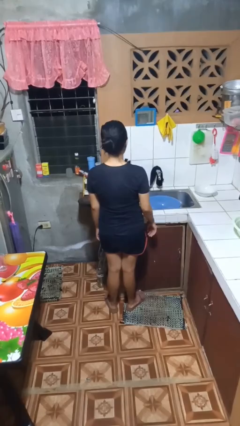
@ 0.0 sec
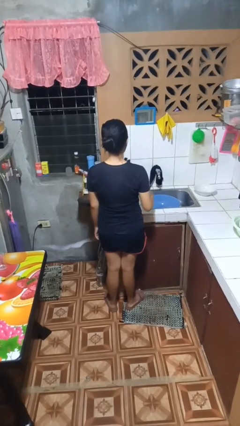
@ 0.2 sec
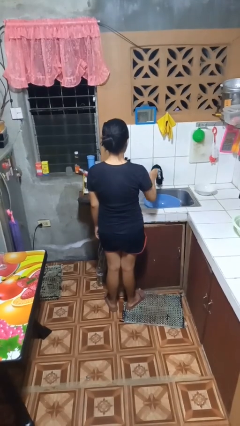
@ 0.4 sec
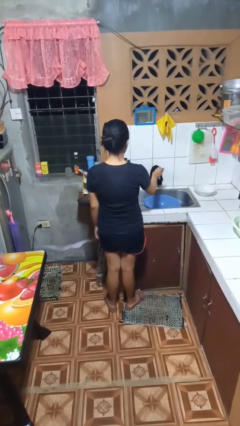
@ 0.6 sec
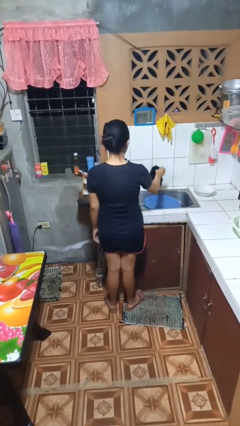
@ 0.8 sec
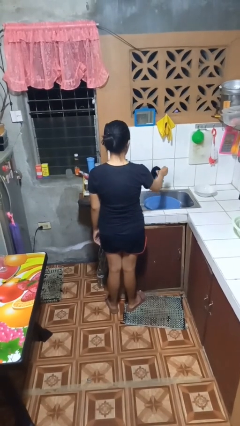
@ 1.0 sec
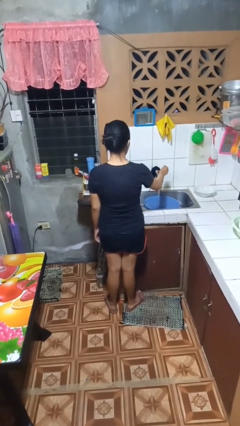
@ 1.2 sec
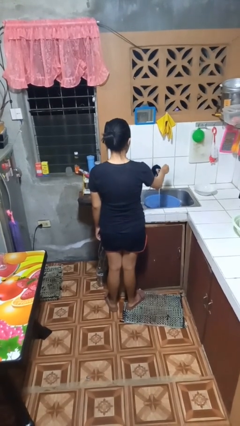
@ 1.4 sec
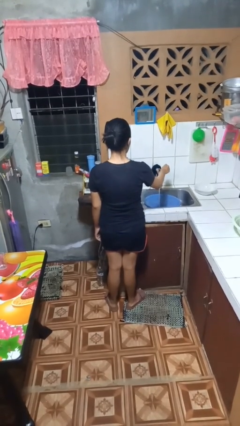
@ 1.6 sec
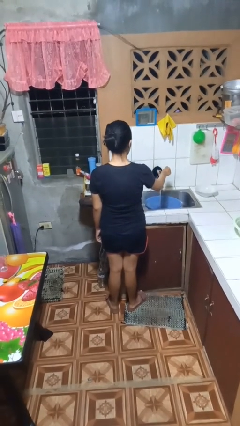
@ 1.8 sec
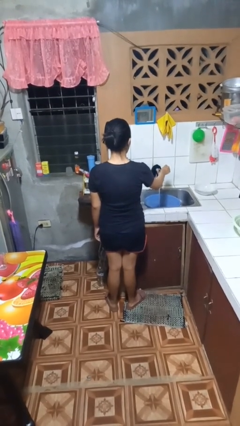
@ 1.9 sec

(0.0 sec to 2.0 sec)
person turns on faucet

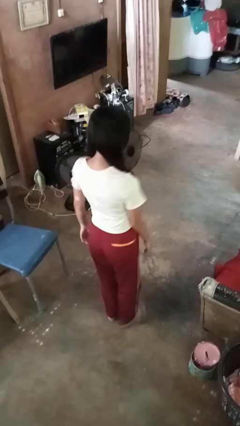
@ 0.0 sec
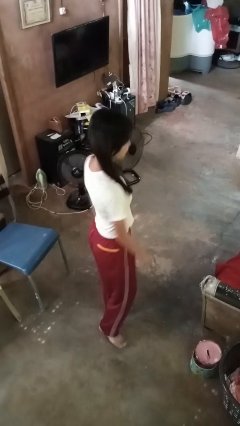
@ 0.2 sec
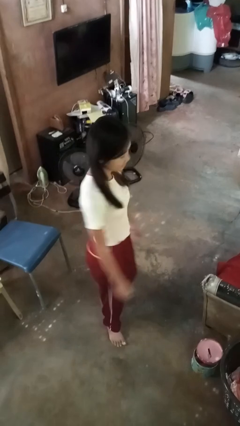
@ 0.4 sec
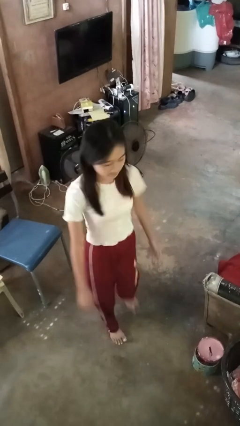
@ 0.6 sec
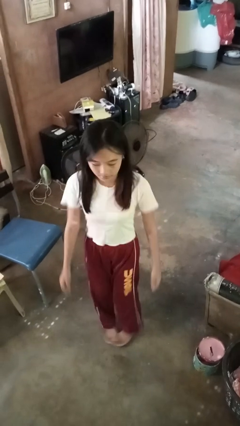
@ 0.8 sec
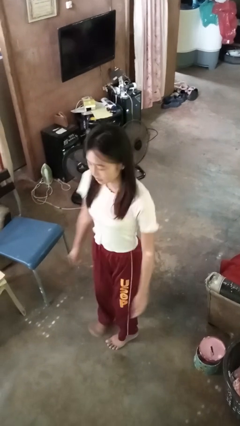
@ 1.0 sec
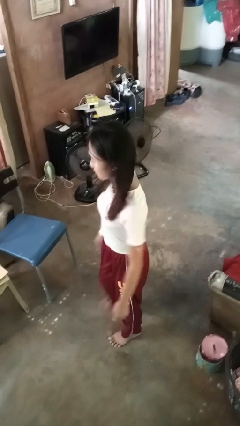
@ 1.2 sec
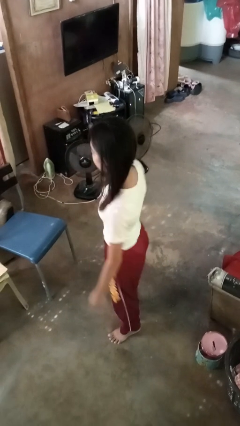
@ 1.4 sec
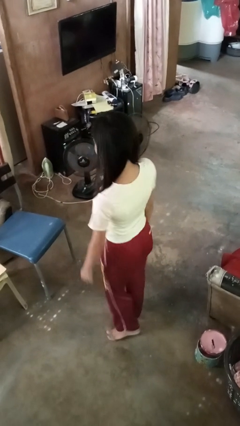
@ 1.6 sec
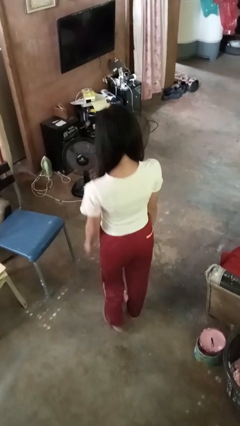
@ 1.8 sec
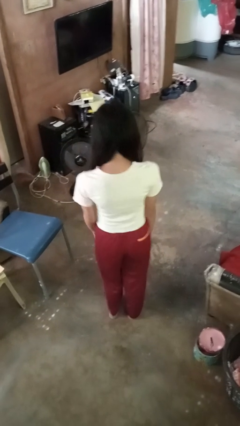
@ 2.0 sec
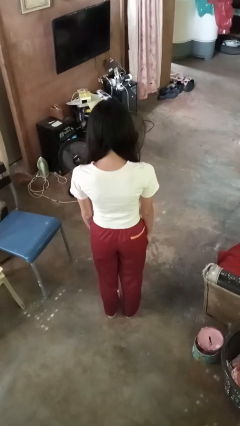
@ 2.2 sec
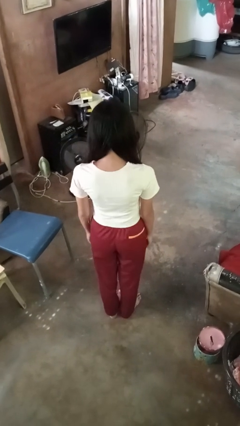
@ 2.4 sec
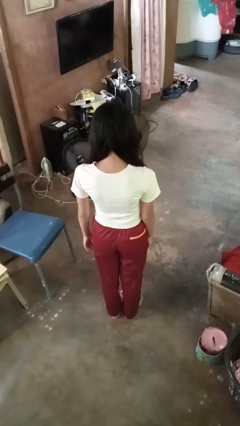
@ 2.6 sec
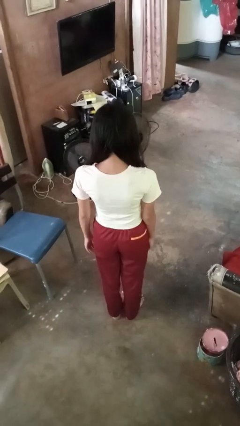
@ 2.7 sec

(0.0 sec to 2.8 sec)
person twirls

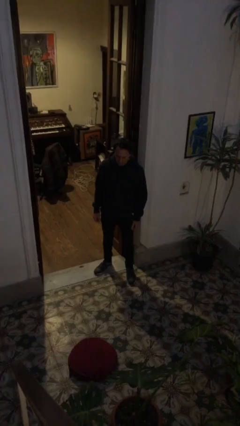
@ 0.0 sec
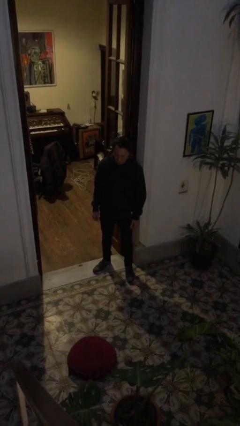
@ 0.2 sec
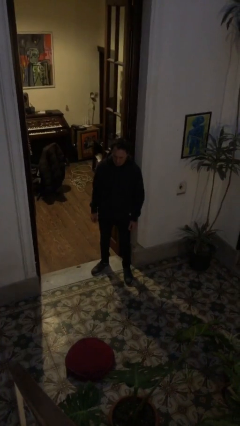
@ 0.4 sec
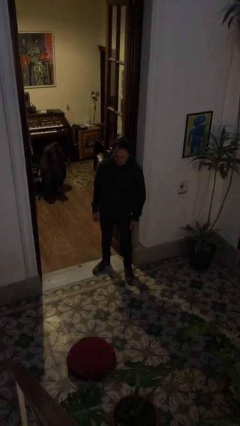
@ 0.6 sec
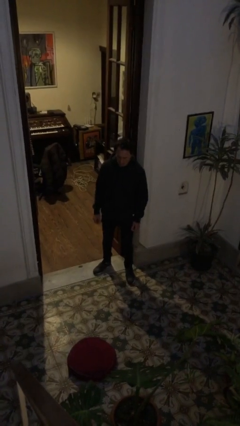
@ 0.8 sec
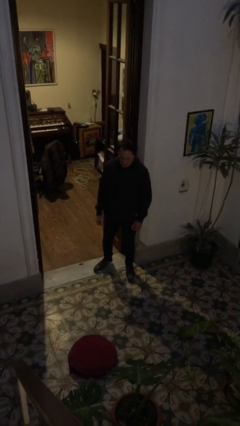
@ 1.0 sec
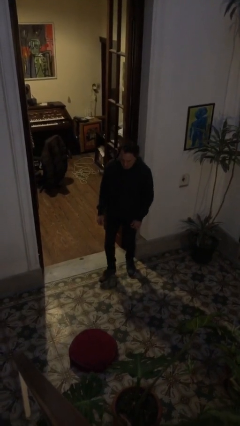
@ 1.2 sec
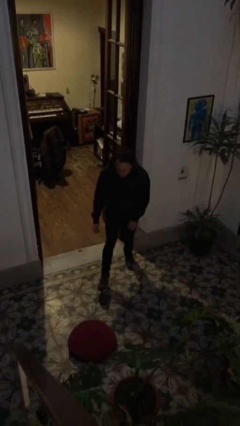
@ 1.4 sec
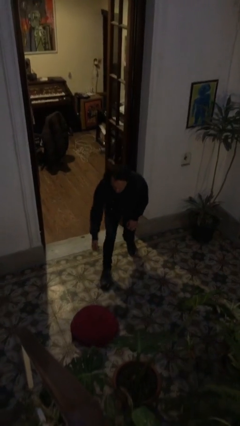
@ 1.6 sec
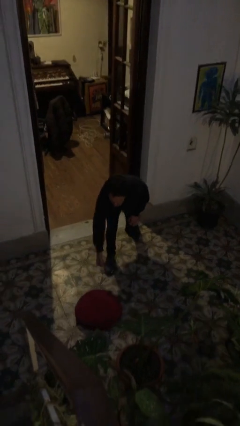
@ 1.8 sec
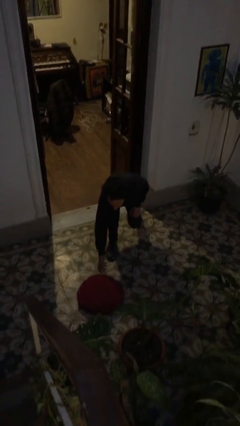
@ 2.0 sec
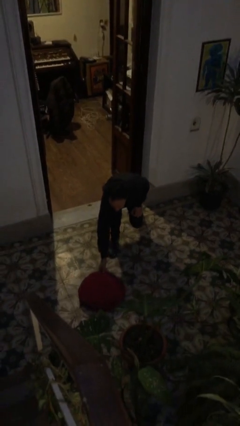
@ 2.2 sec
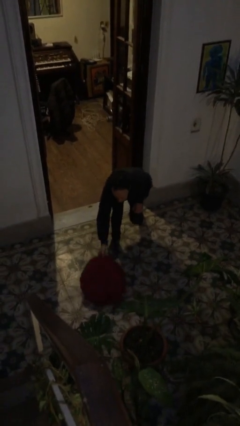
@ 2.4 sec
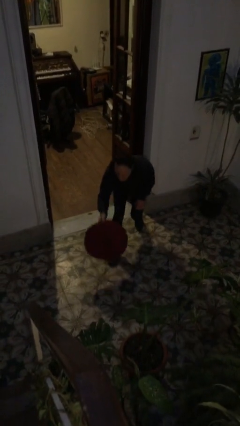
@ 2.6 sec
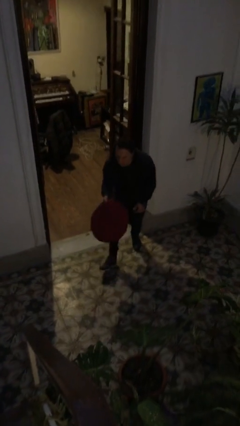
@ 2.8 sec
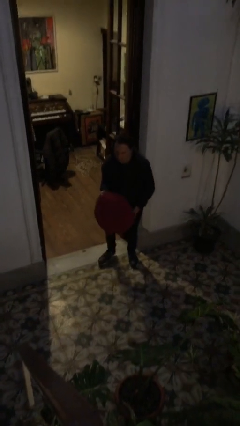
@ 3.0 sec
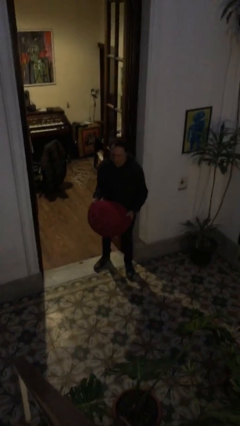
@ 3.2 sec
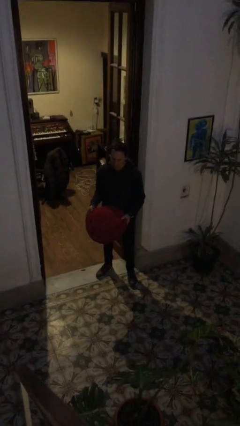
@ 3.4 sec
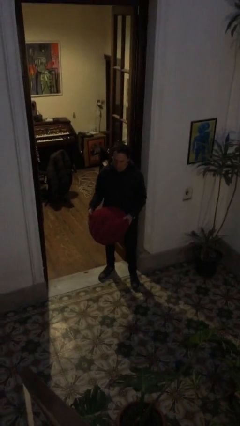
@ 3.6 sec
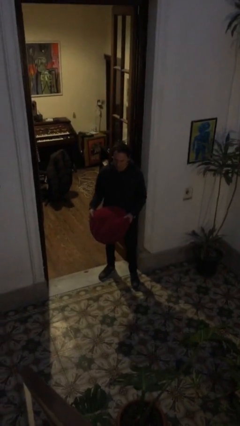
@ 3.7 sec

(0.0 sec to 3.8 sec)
person picks up object from floor

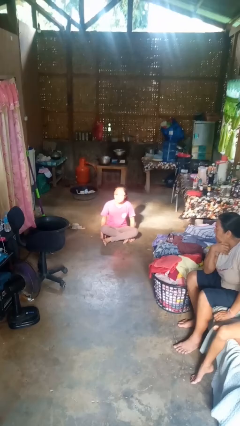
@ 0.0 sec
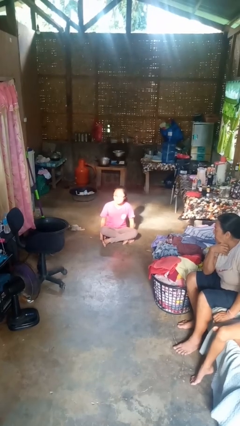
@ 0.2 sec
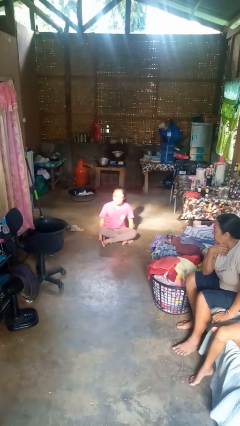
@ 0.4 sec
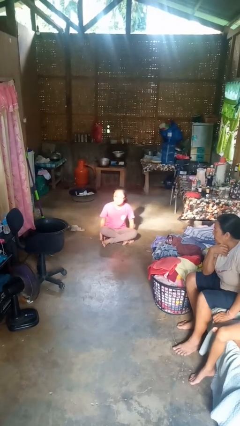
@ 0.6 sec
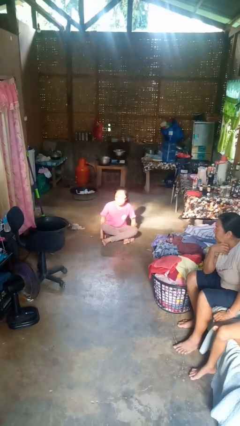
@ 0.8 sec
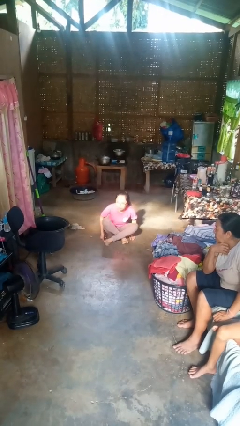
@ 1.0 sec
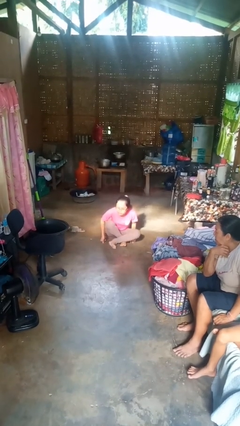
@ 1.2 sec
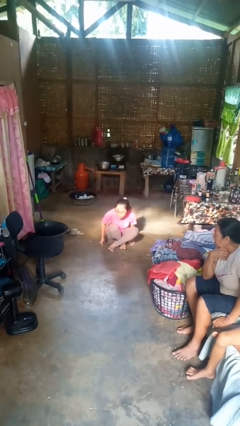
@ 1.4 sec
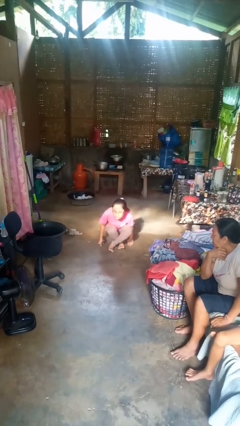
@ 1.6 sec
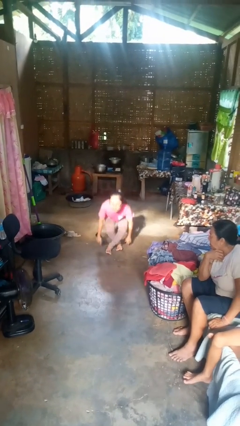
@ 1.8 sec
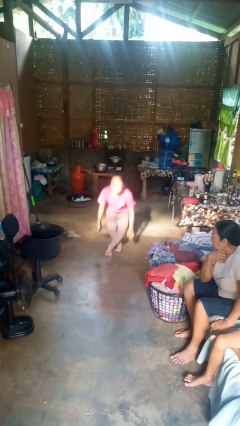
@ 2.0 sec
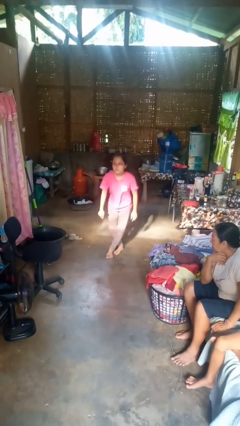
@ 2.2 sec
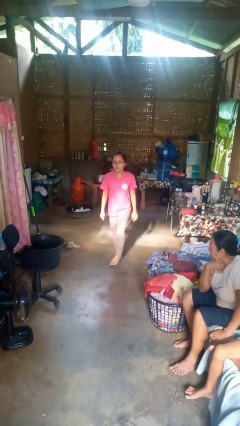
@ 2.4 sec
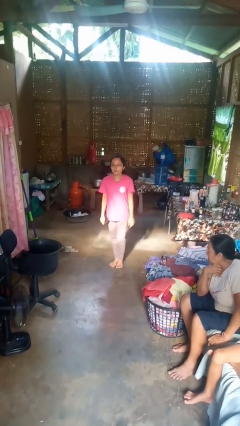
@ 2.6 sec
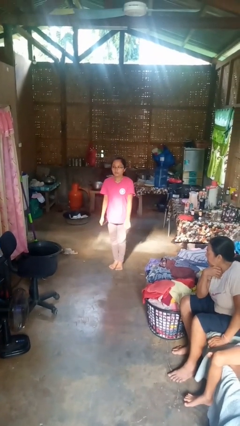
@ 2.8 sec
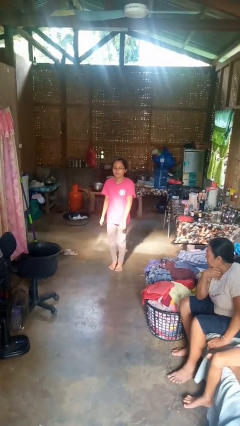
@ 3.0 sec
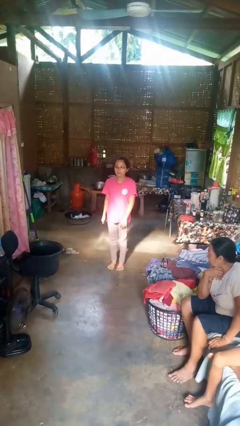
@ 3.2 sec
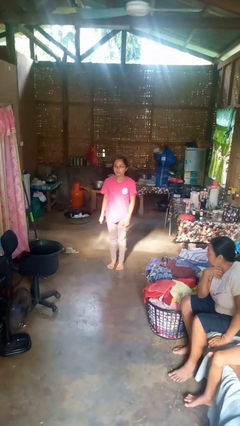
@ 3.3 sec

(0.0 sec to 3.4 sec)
person stands up from floor

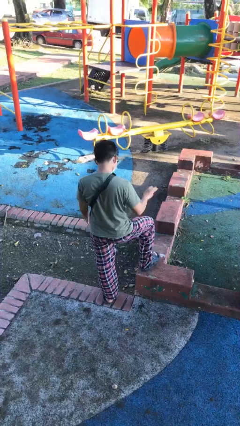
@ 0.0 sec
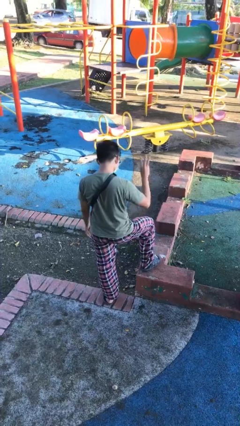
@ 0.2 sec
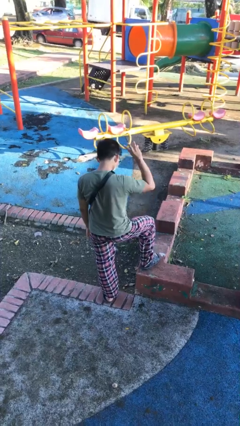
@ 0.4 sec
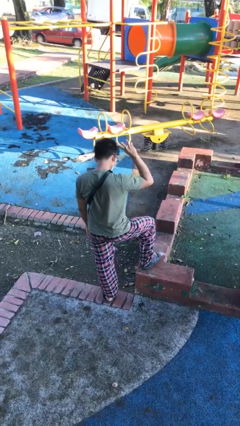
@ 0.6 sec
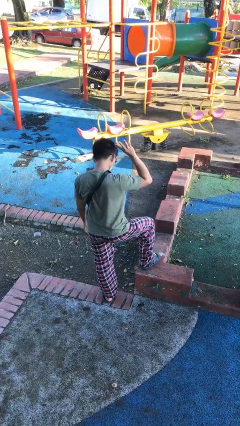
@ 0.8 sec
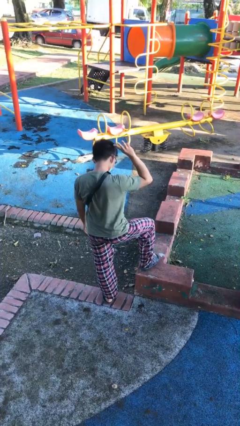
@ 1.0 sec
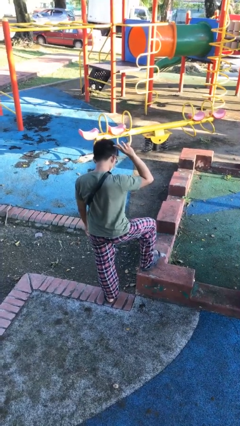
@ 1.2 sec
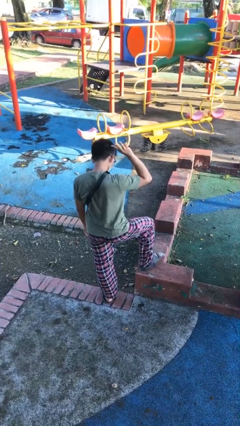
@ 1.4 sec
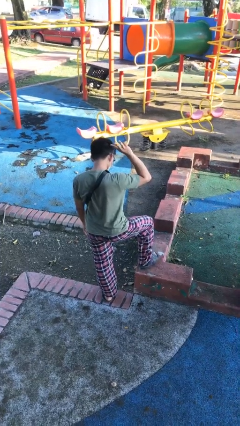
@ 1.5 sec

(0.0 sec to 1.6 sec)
person gestures number three

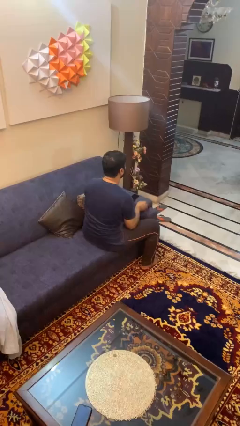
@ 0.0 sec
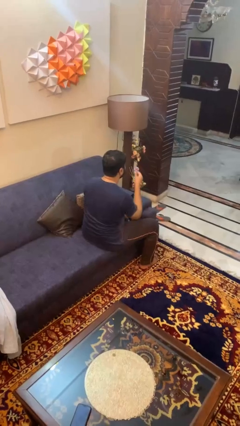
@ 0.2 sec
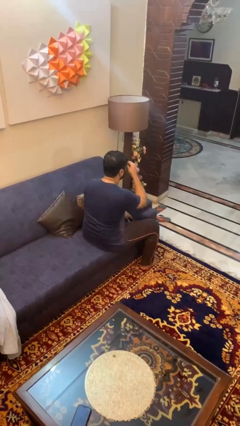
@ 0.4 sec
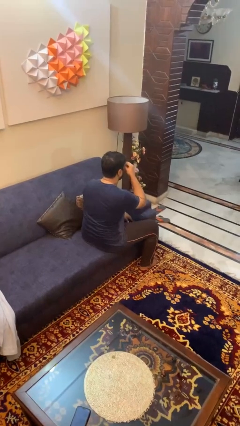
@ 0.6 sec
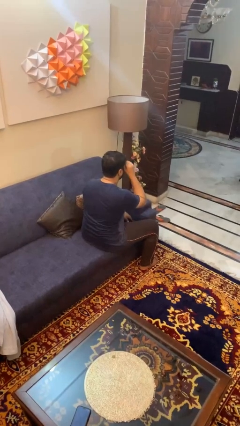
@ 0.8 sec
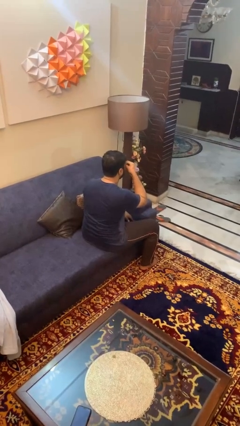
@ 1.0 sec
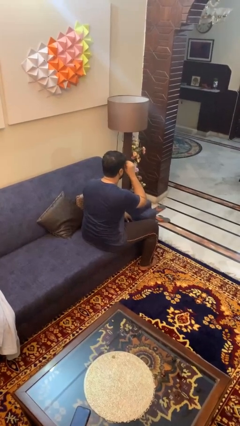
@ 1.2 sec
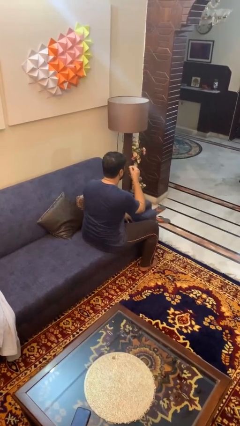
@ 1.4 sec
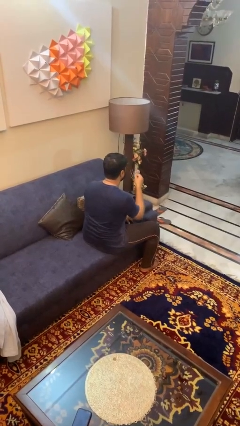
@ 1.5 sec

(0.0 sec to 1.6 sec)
person rubs eyes

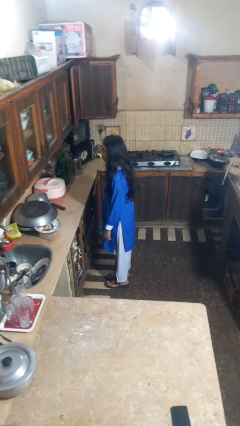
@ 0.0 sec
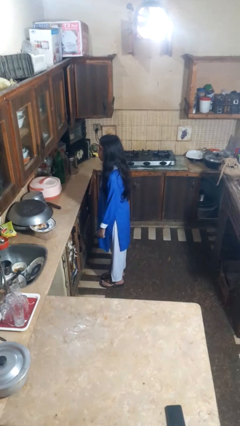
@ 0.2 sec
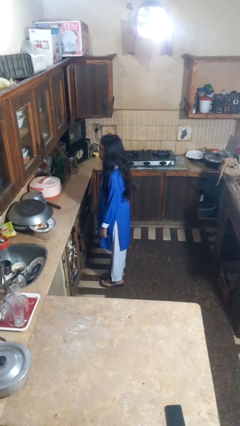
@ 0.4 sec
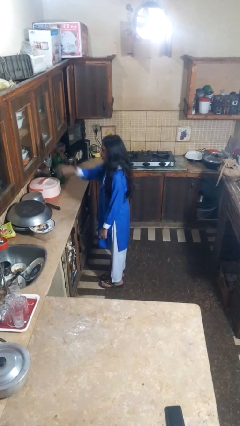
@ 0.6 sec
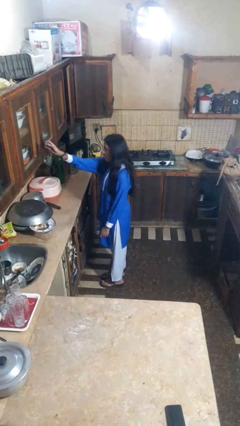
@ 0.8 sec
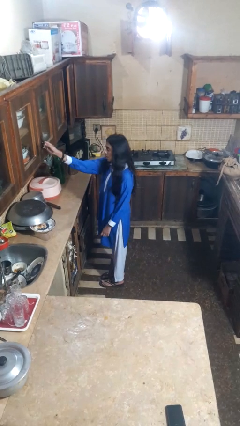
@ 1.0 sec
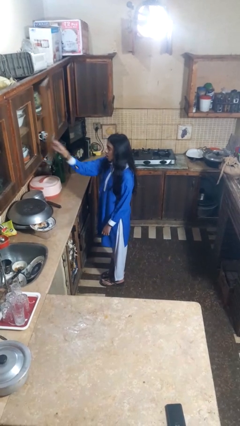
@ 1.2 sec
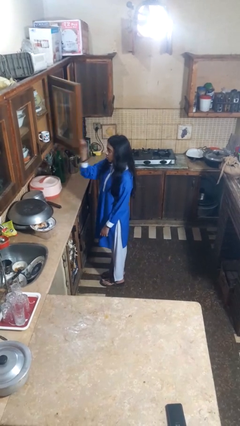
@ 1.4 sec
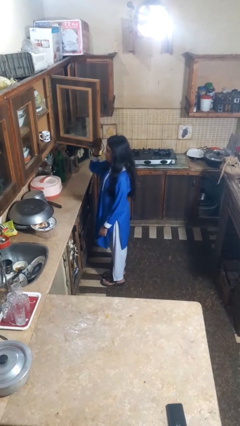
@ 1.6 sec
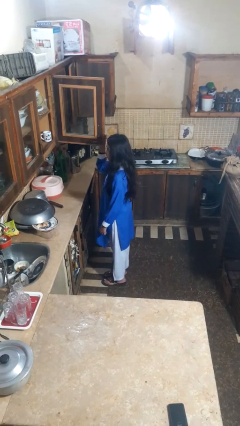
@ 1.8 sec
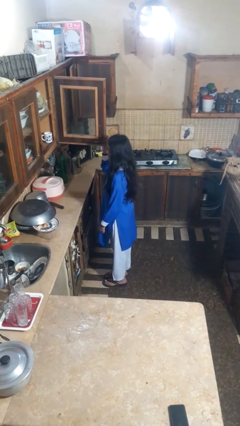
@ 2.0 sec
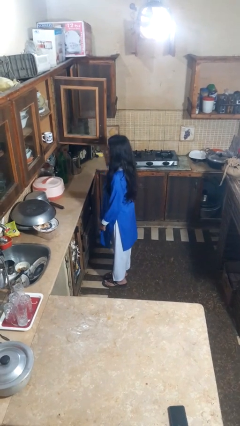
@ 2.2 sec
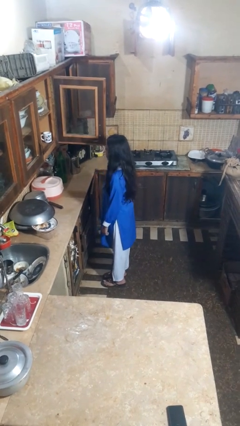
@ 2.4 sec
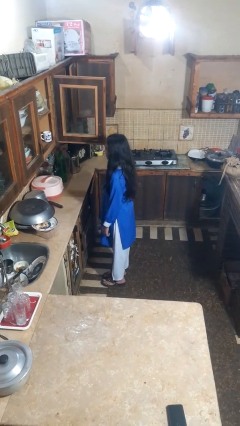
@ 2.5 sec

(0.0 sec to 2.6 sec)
person opens cabinet
